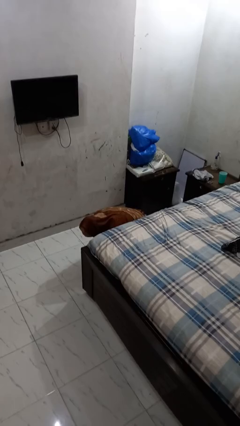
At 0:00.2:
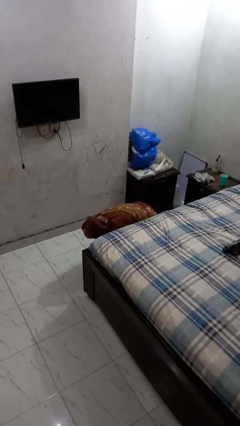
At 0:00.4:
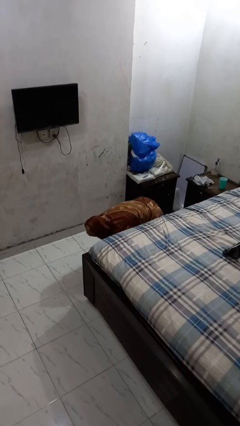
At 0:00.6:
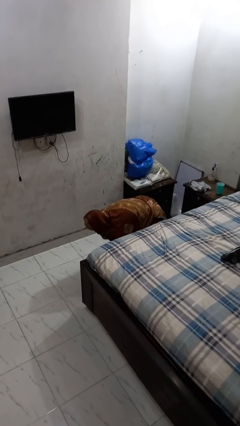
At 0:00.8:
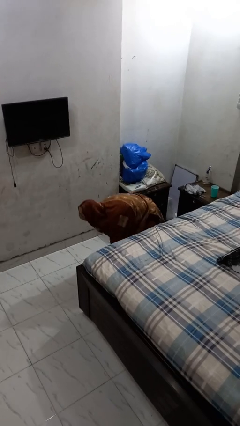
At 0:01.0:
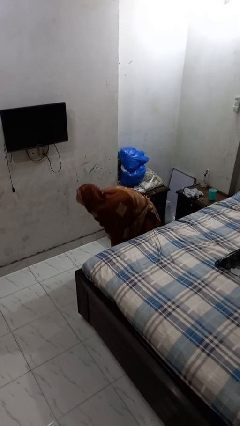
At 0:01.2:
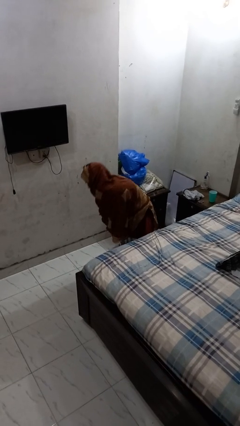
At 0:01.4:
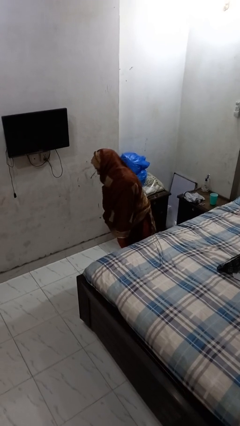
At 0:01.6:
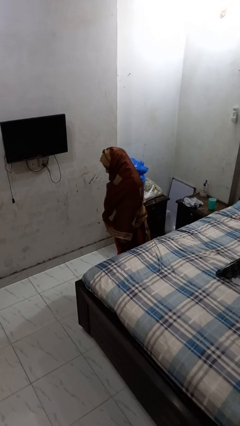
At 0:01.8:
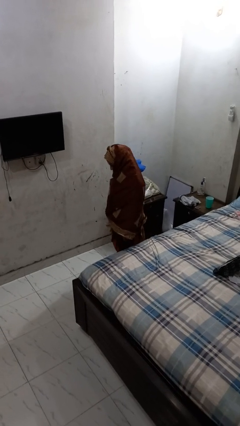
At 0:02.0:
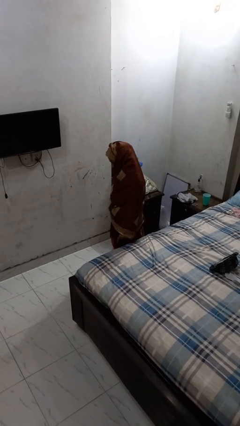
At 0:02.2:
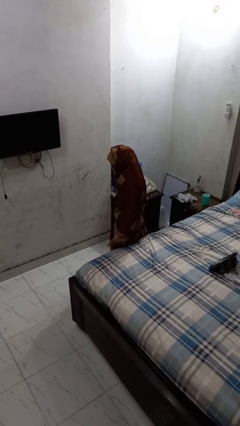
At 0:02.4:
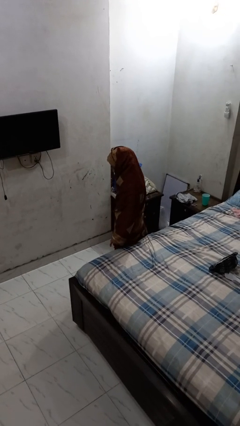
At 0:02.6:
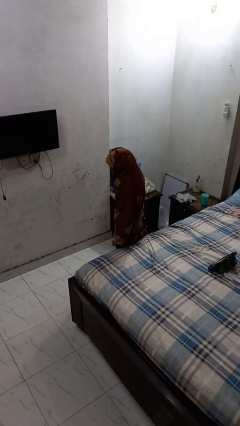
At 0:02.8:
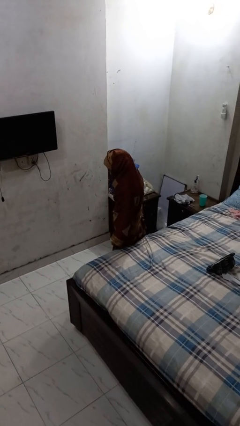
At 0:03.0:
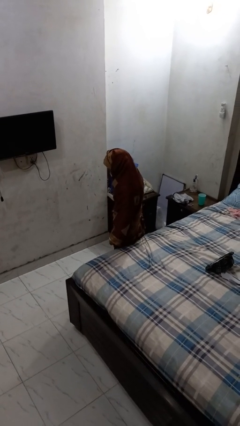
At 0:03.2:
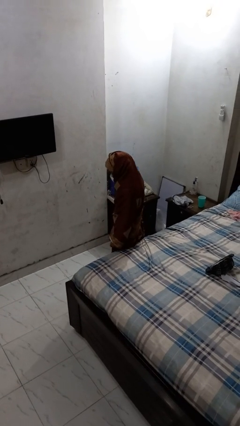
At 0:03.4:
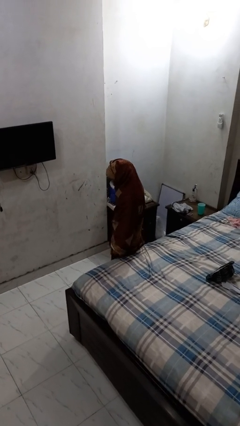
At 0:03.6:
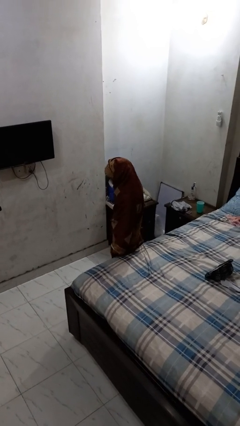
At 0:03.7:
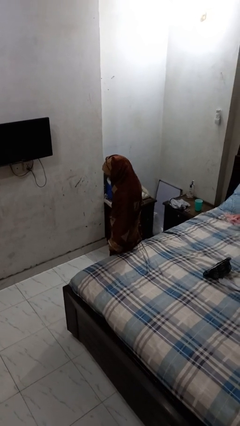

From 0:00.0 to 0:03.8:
person stands up from floor

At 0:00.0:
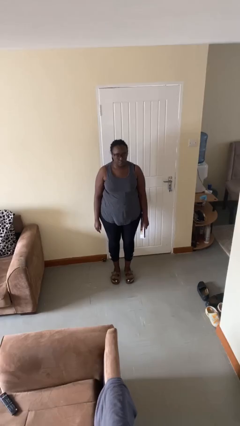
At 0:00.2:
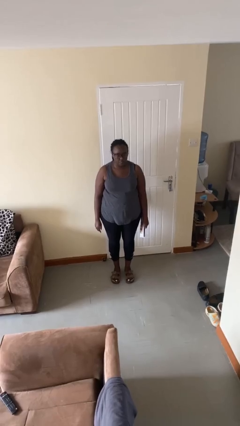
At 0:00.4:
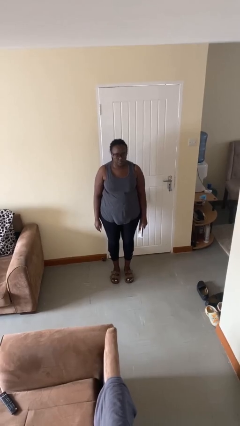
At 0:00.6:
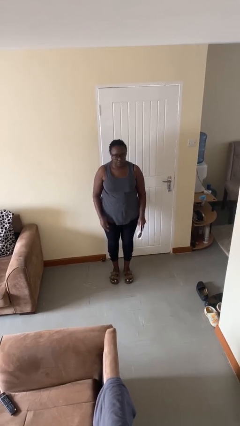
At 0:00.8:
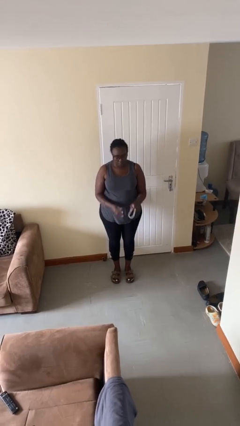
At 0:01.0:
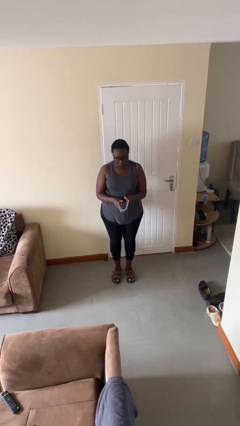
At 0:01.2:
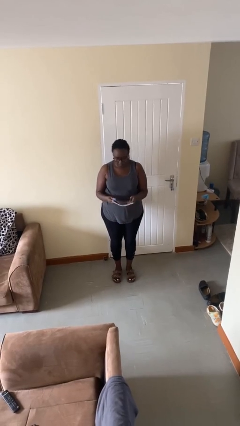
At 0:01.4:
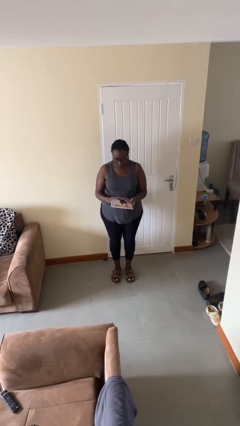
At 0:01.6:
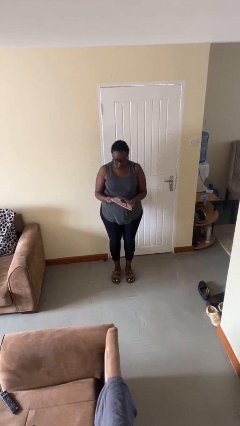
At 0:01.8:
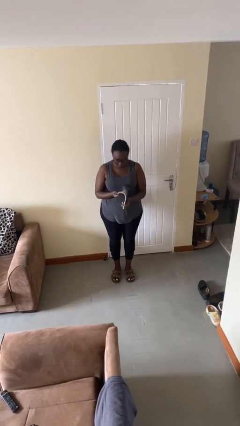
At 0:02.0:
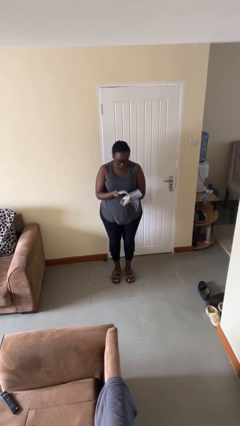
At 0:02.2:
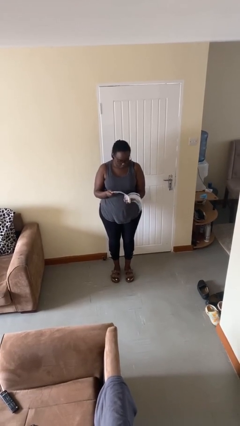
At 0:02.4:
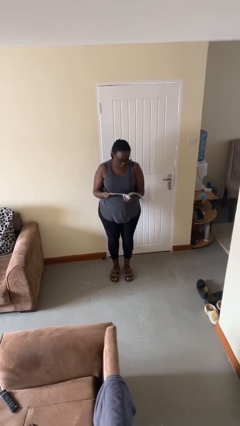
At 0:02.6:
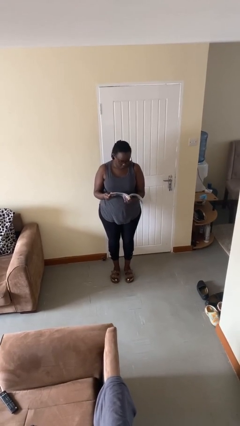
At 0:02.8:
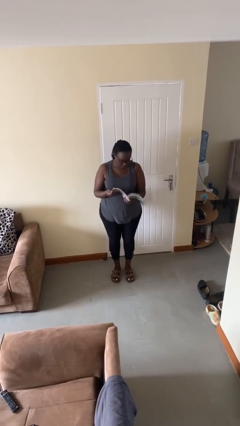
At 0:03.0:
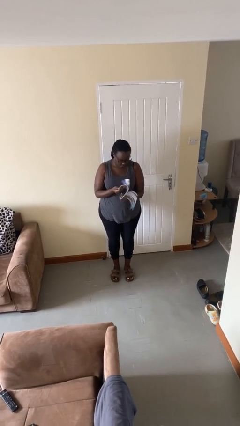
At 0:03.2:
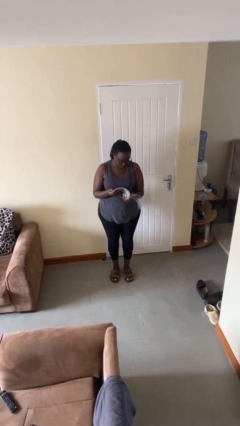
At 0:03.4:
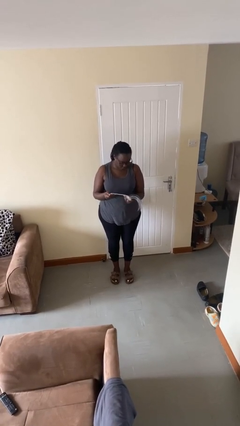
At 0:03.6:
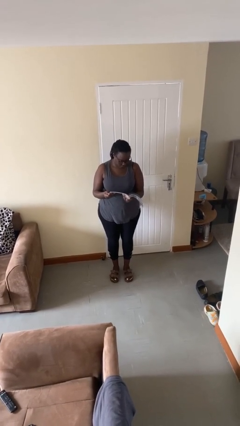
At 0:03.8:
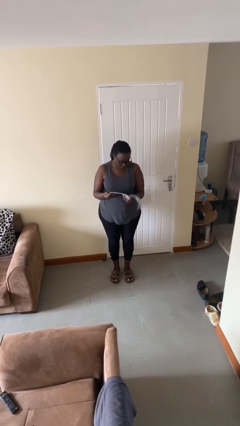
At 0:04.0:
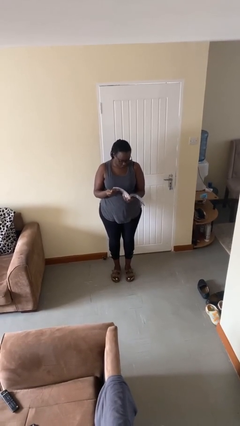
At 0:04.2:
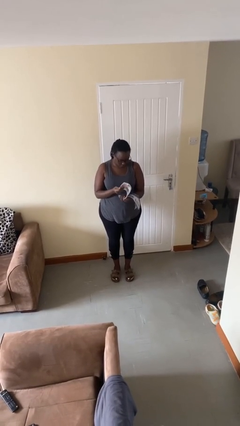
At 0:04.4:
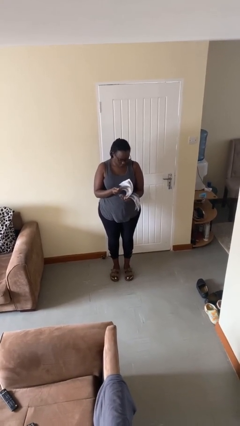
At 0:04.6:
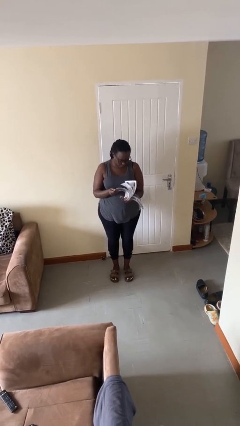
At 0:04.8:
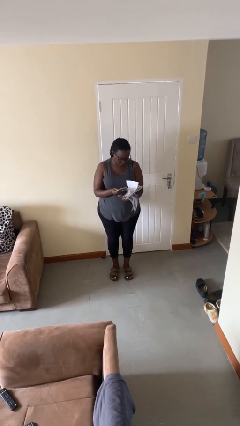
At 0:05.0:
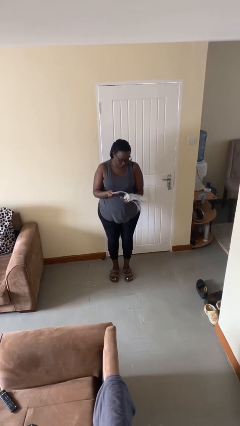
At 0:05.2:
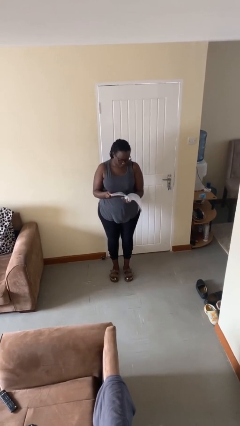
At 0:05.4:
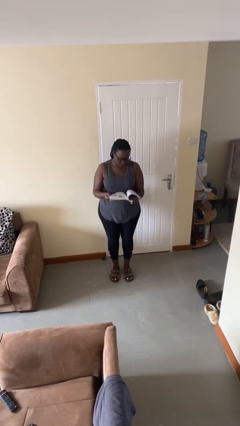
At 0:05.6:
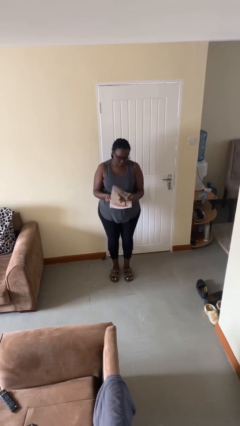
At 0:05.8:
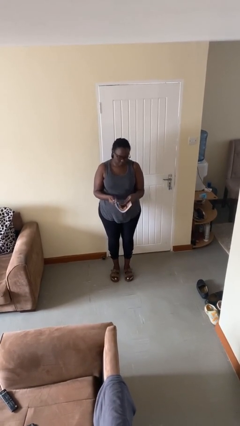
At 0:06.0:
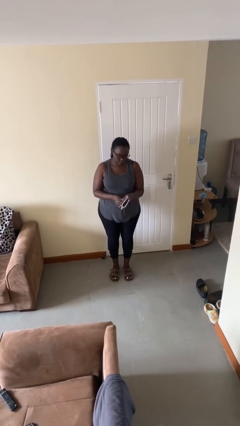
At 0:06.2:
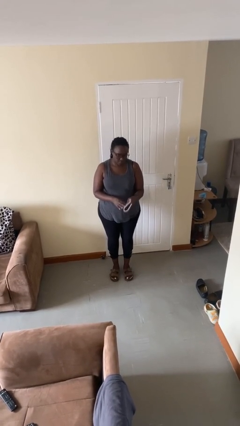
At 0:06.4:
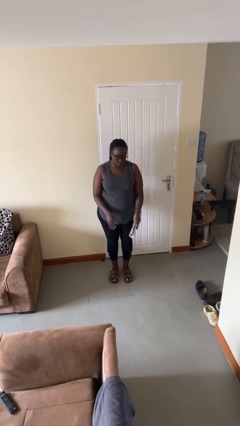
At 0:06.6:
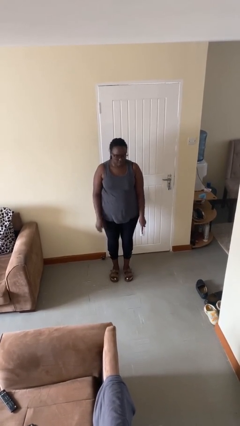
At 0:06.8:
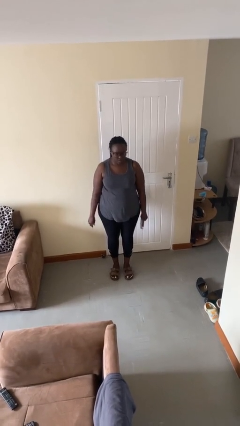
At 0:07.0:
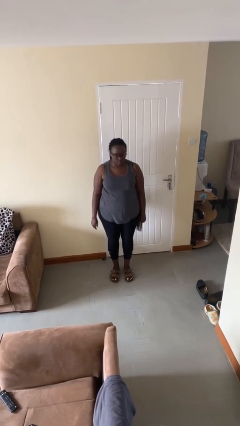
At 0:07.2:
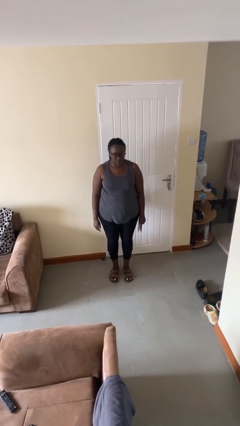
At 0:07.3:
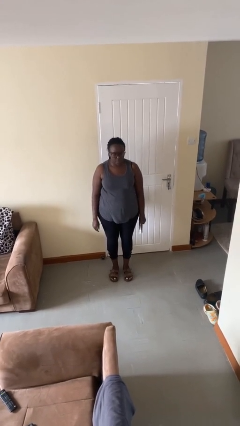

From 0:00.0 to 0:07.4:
person reads magazine

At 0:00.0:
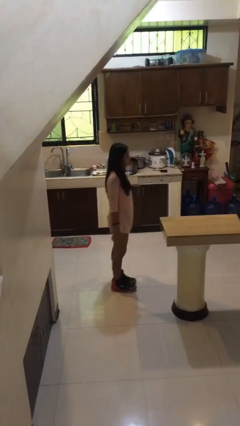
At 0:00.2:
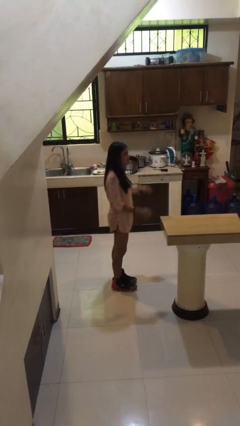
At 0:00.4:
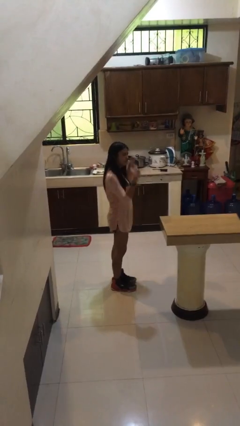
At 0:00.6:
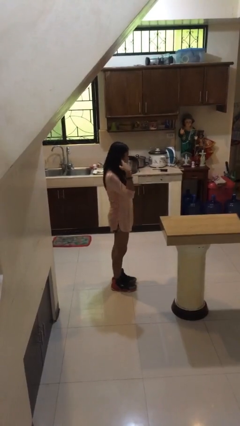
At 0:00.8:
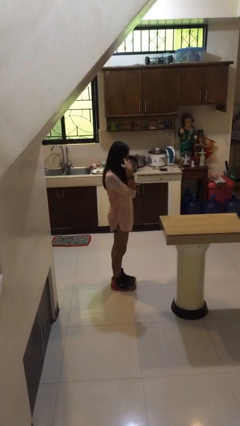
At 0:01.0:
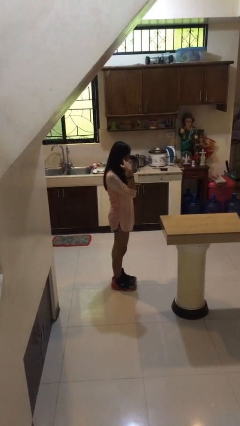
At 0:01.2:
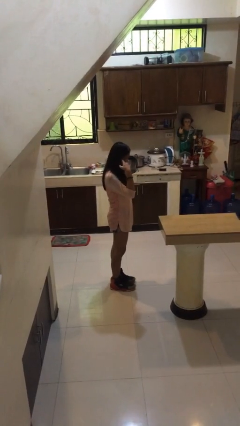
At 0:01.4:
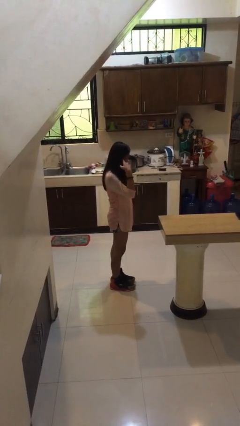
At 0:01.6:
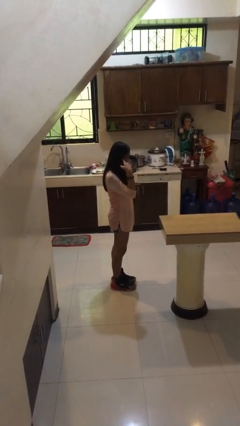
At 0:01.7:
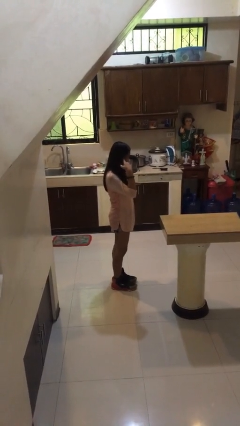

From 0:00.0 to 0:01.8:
person puts fingers in ear

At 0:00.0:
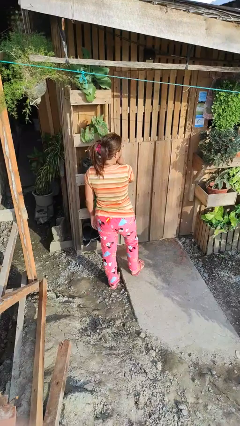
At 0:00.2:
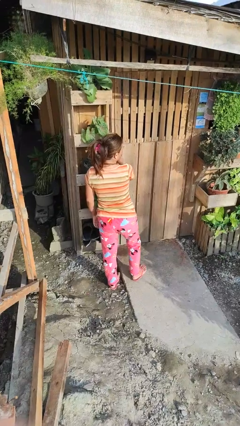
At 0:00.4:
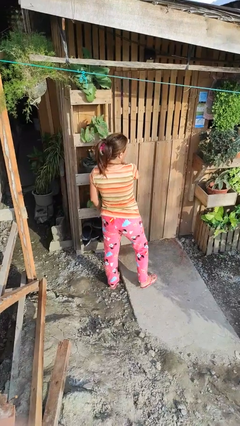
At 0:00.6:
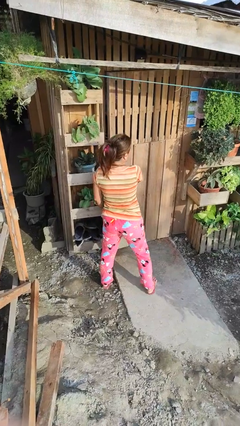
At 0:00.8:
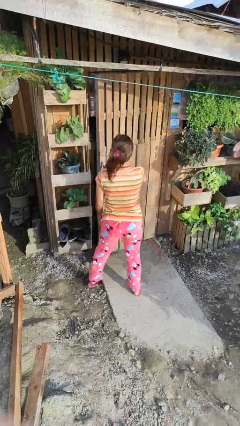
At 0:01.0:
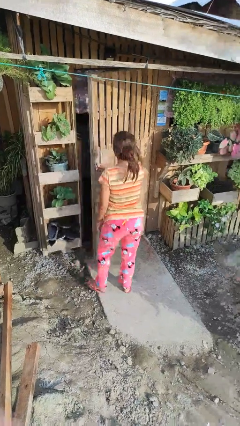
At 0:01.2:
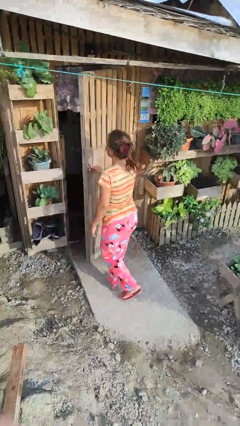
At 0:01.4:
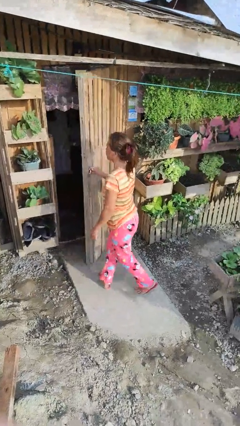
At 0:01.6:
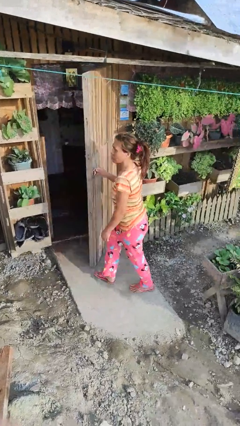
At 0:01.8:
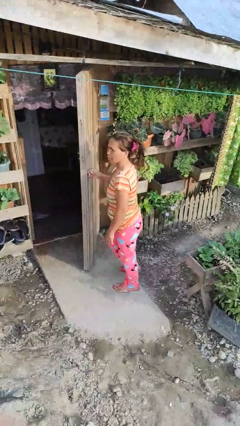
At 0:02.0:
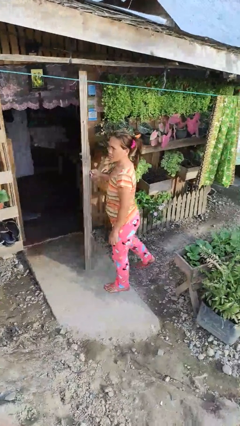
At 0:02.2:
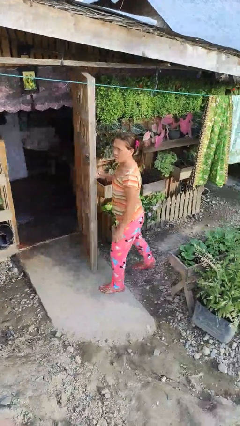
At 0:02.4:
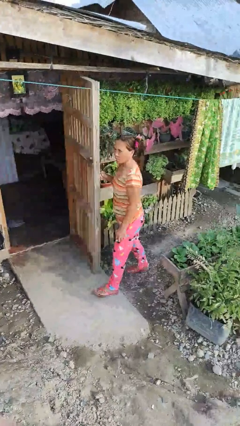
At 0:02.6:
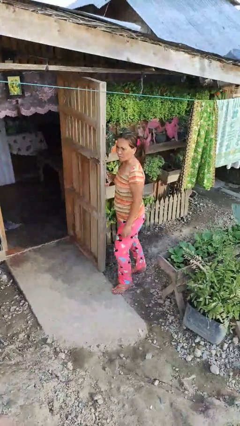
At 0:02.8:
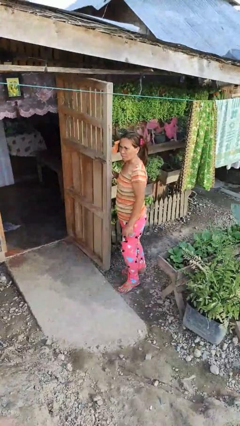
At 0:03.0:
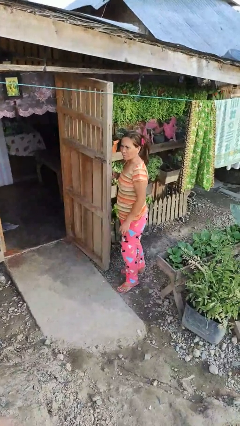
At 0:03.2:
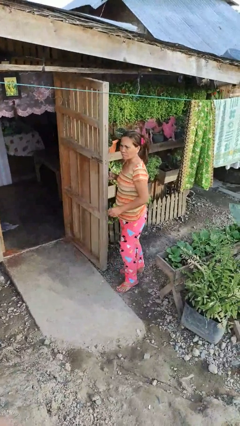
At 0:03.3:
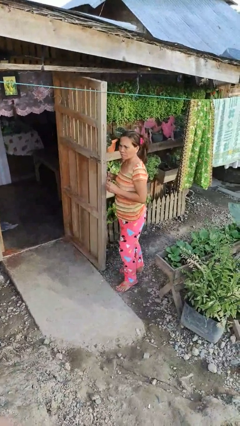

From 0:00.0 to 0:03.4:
person opens facility door

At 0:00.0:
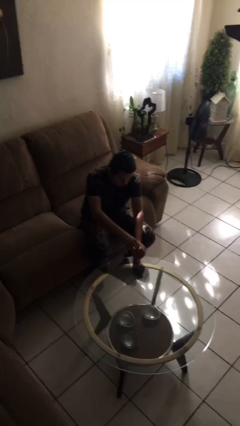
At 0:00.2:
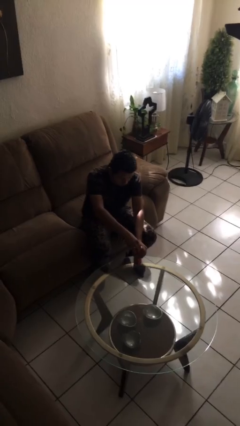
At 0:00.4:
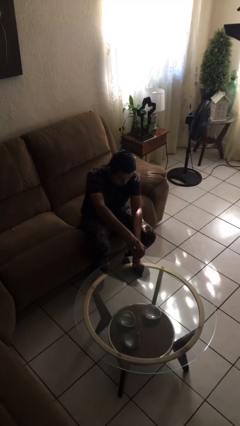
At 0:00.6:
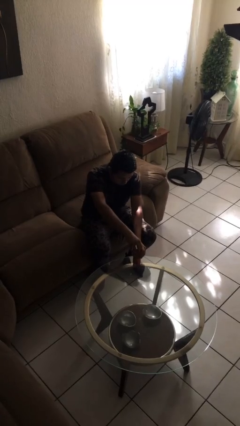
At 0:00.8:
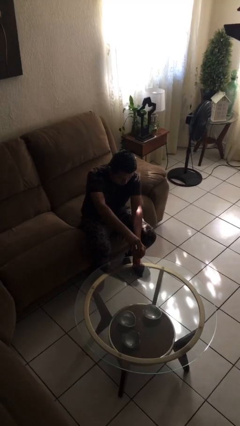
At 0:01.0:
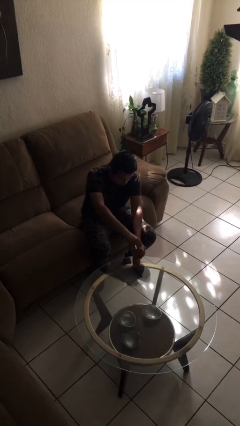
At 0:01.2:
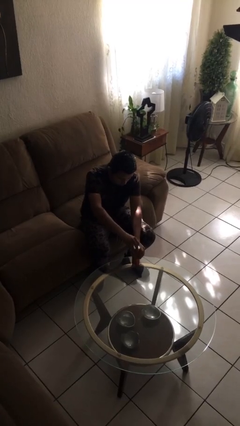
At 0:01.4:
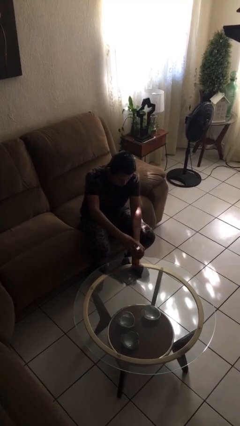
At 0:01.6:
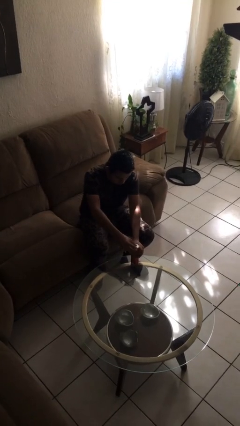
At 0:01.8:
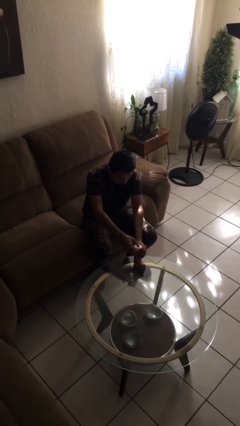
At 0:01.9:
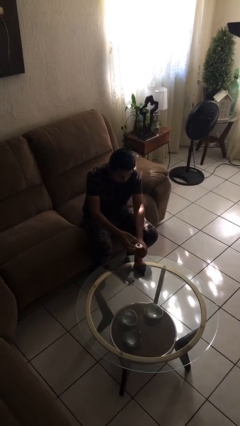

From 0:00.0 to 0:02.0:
person opens beverage can
